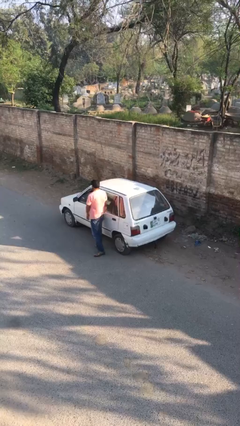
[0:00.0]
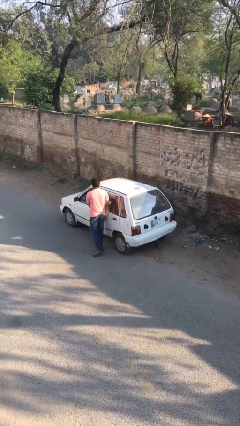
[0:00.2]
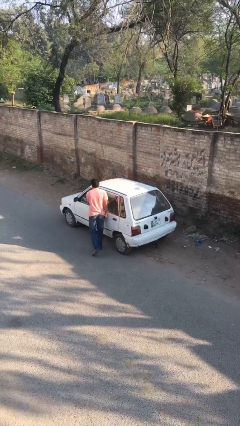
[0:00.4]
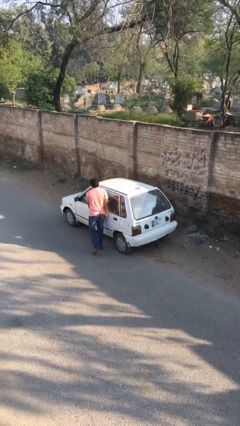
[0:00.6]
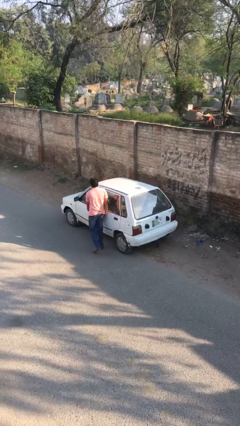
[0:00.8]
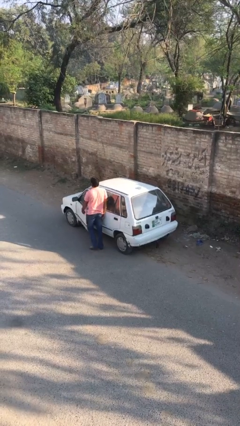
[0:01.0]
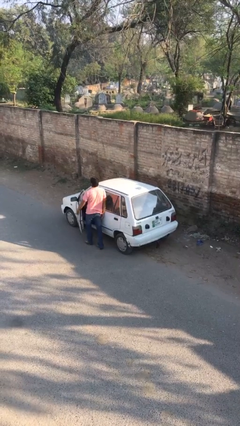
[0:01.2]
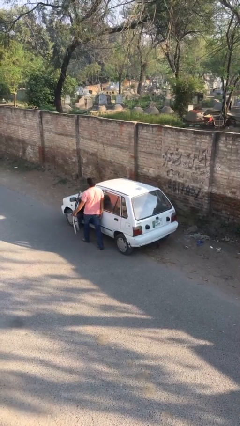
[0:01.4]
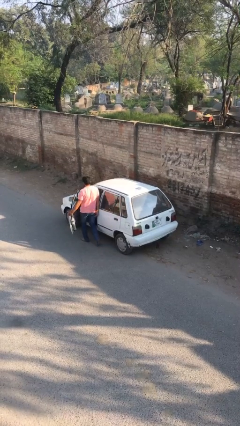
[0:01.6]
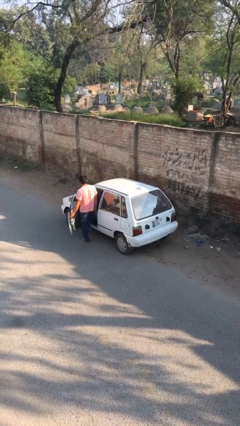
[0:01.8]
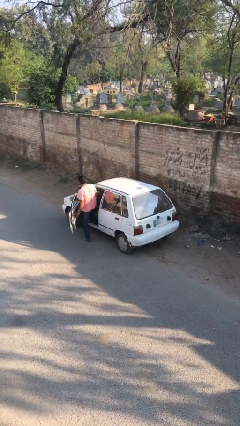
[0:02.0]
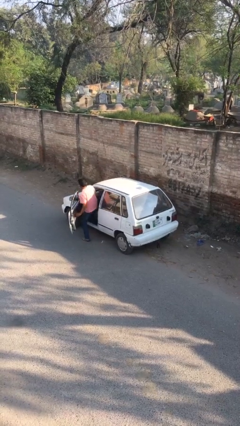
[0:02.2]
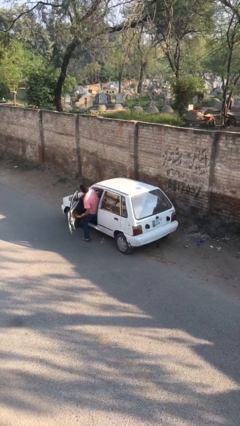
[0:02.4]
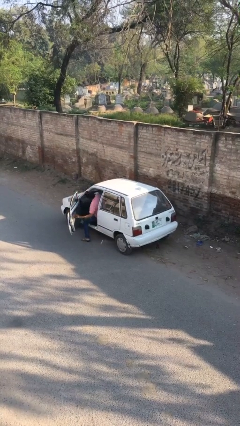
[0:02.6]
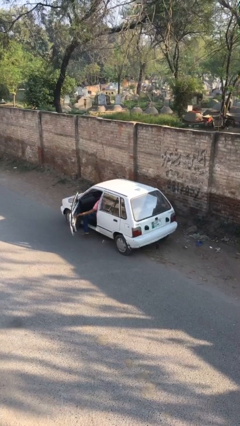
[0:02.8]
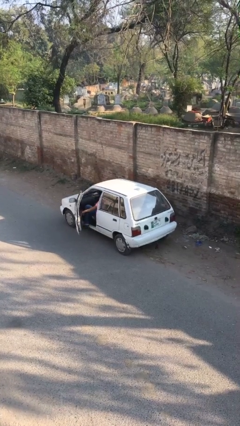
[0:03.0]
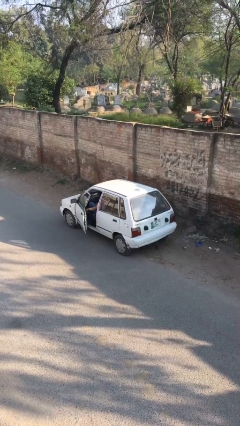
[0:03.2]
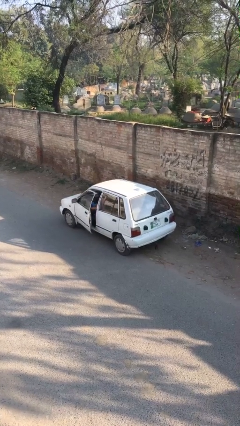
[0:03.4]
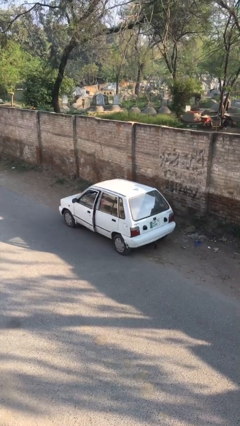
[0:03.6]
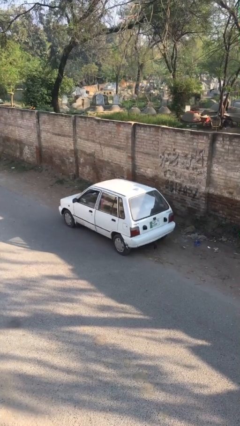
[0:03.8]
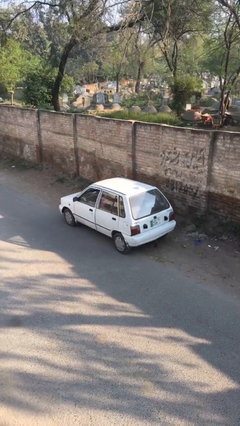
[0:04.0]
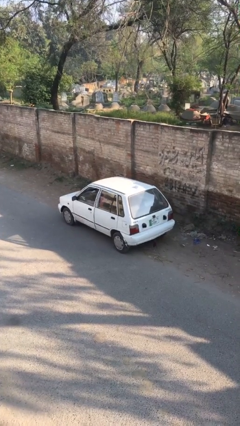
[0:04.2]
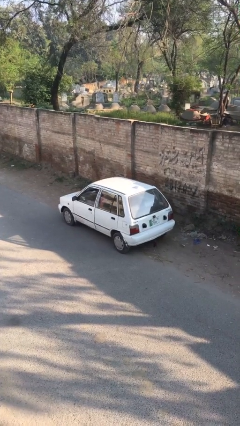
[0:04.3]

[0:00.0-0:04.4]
car picks up person

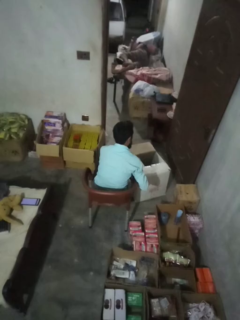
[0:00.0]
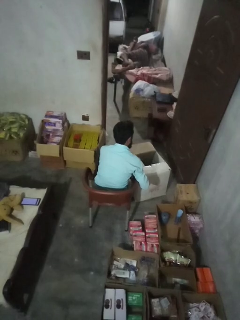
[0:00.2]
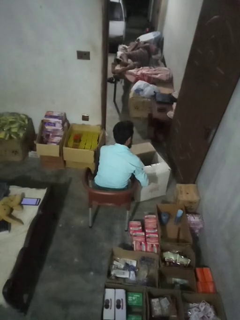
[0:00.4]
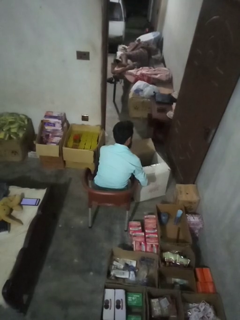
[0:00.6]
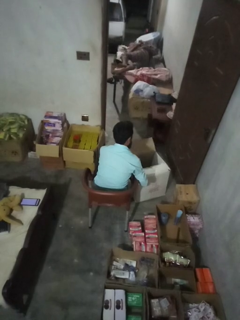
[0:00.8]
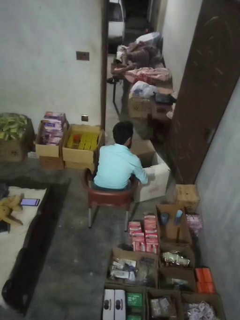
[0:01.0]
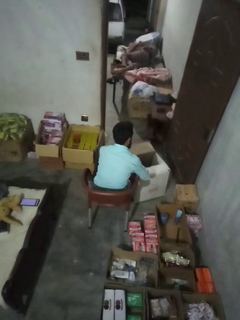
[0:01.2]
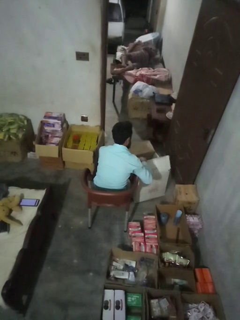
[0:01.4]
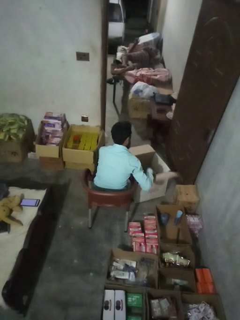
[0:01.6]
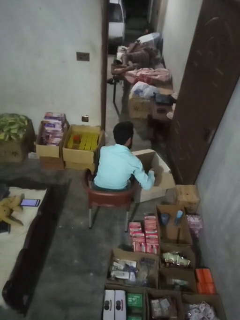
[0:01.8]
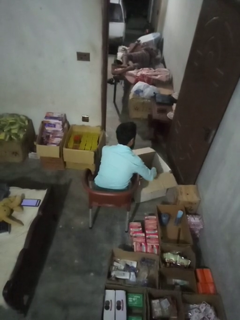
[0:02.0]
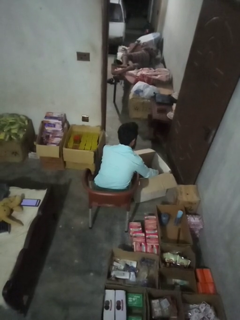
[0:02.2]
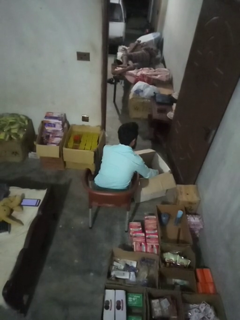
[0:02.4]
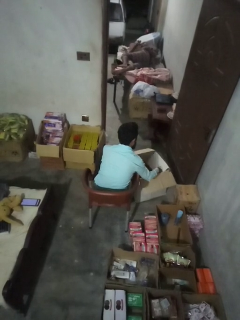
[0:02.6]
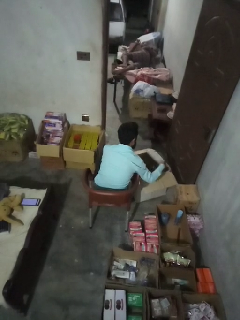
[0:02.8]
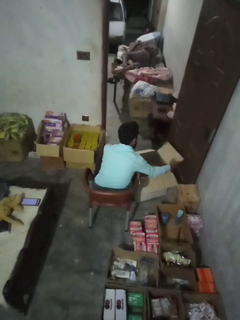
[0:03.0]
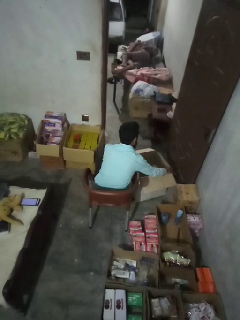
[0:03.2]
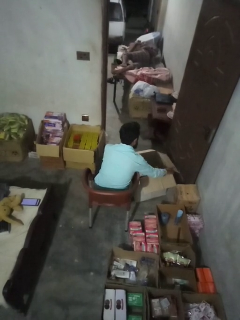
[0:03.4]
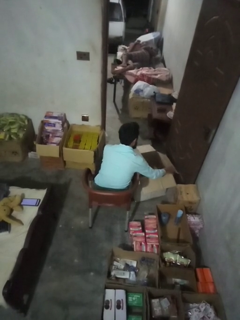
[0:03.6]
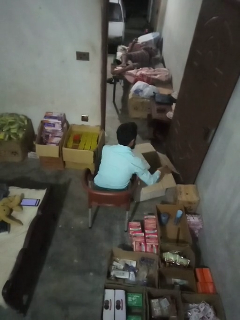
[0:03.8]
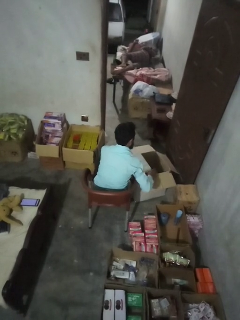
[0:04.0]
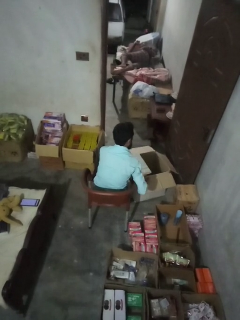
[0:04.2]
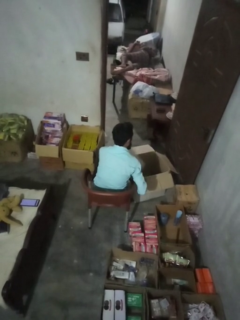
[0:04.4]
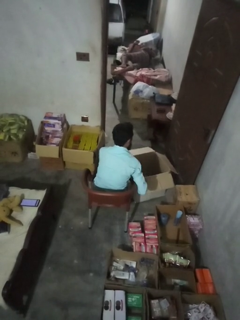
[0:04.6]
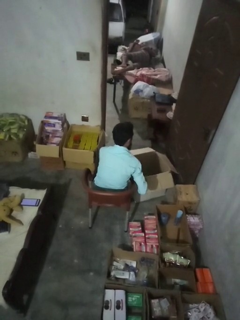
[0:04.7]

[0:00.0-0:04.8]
person opens box

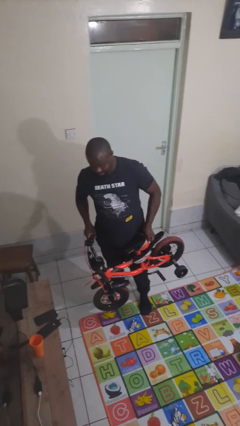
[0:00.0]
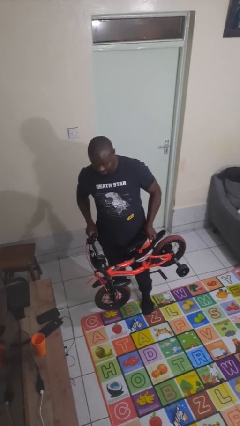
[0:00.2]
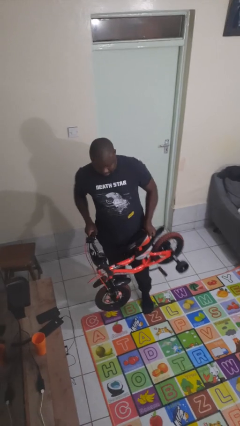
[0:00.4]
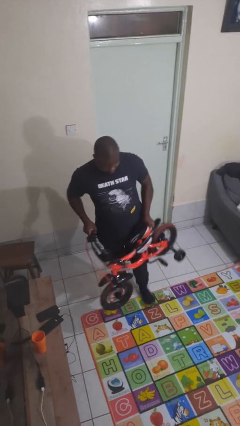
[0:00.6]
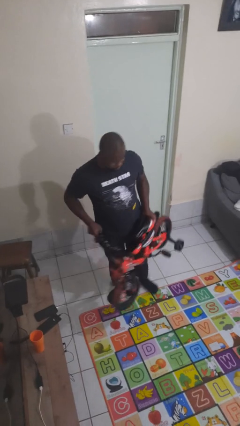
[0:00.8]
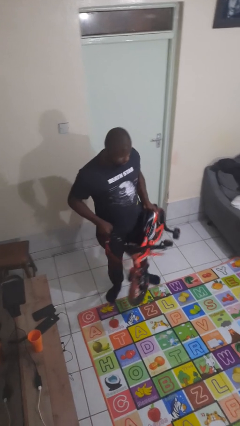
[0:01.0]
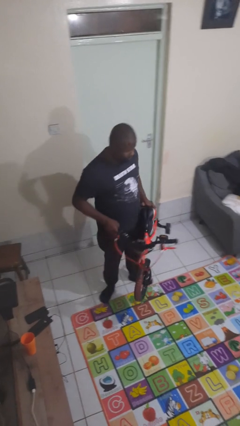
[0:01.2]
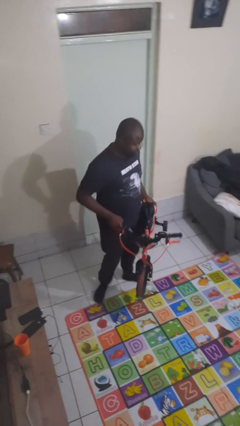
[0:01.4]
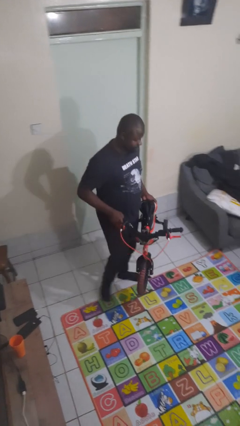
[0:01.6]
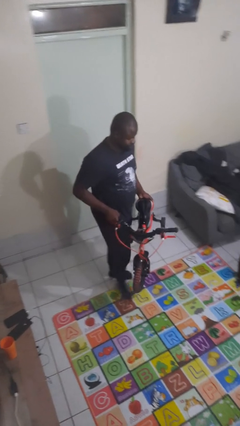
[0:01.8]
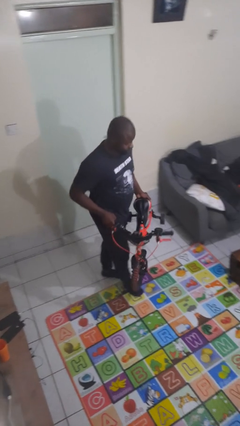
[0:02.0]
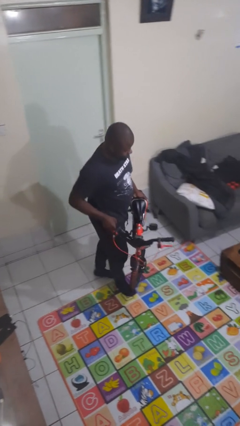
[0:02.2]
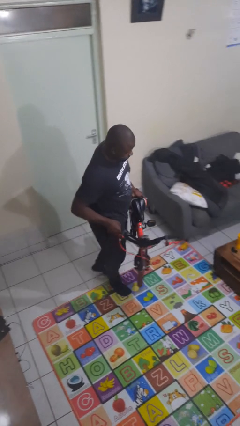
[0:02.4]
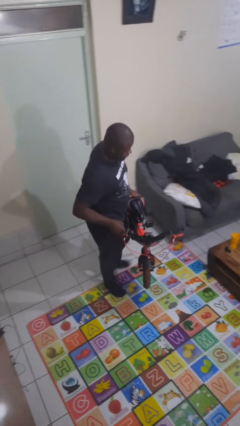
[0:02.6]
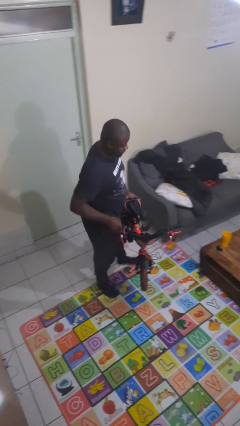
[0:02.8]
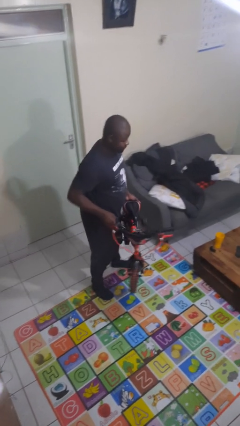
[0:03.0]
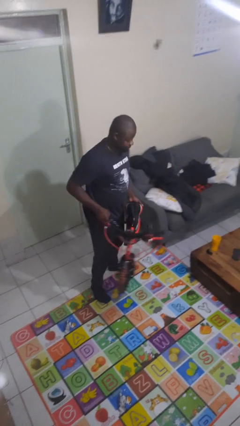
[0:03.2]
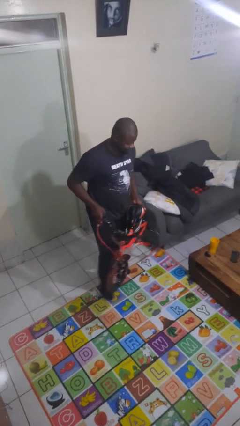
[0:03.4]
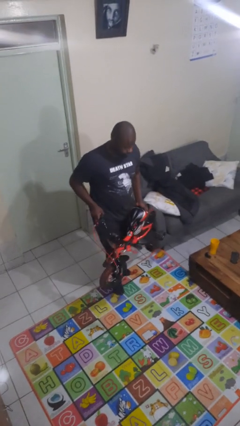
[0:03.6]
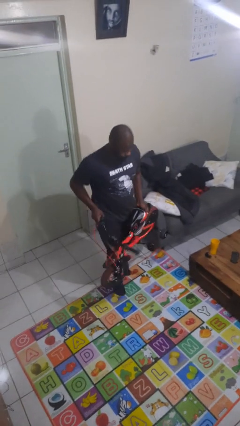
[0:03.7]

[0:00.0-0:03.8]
person carries bicycle

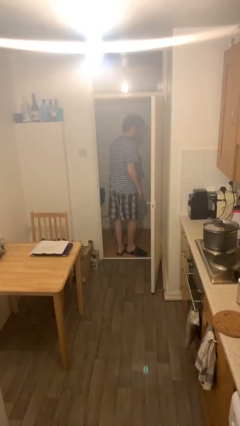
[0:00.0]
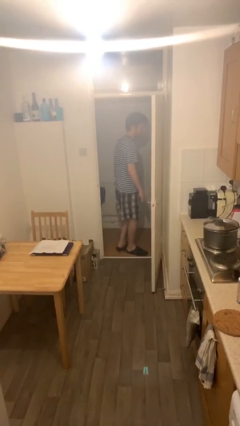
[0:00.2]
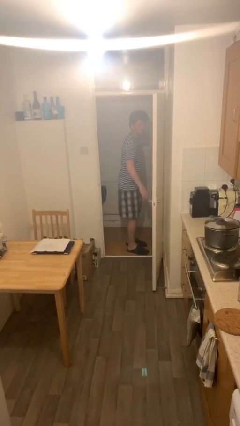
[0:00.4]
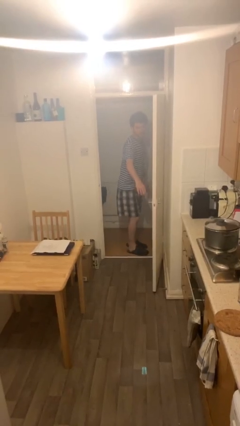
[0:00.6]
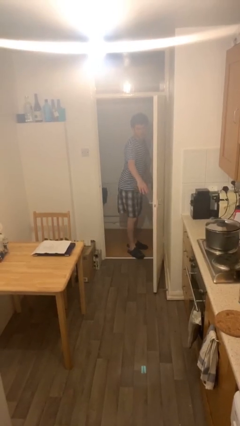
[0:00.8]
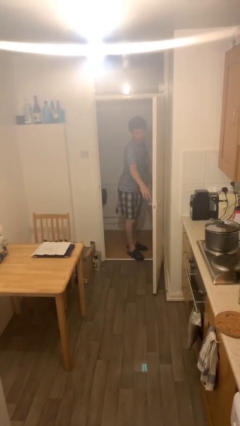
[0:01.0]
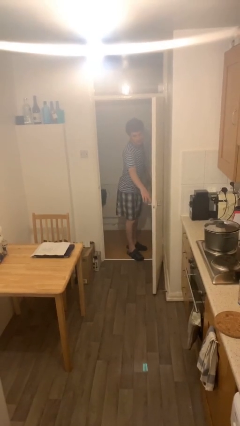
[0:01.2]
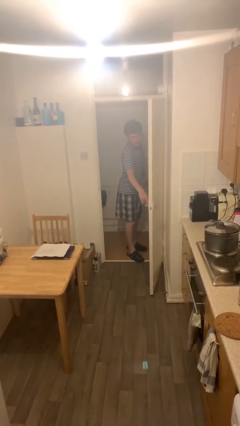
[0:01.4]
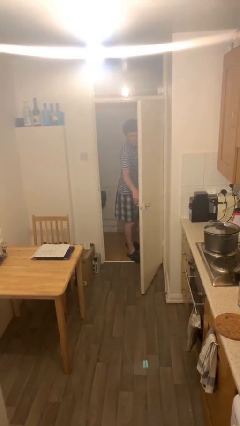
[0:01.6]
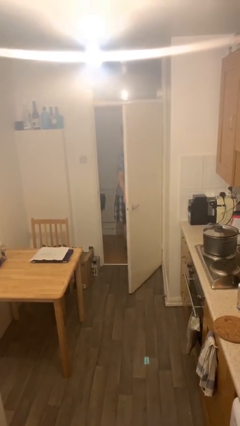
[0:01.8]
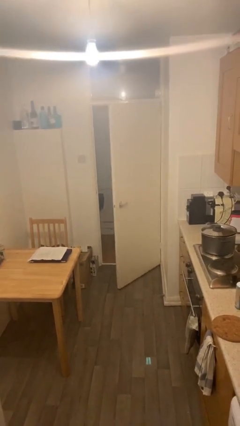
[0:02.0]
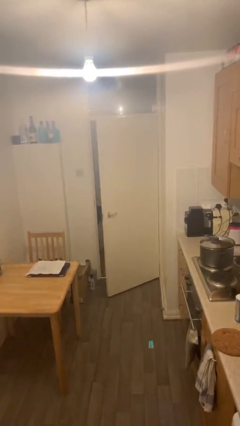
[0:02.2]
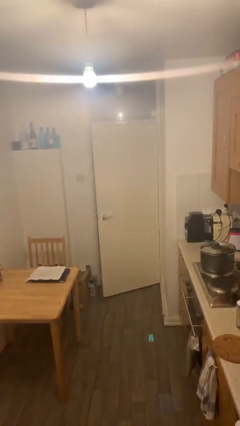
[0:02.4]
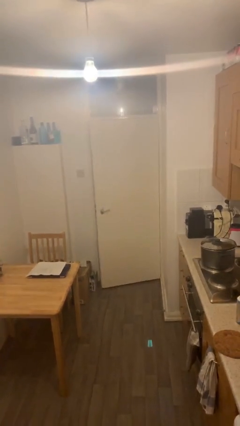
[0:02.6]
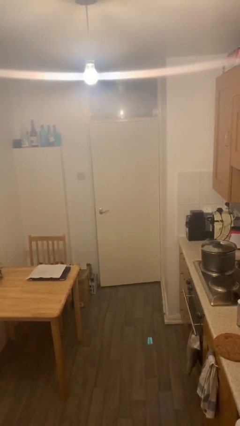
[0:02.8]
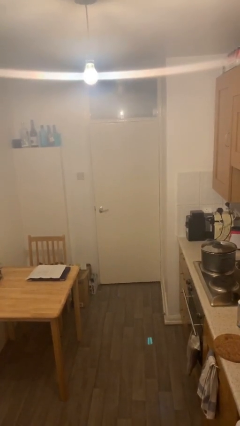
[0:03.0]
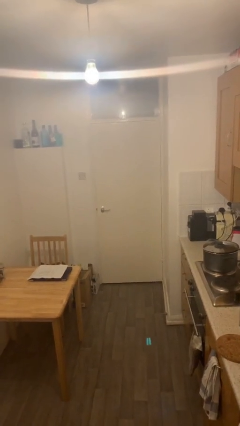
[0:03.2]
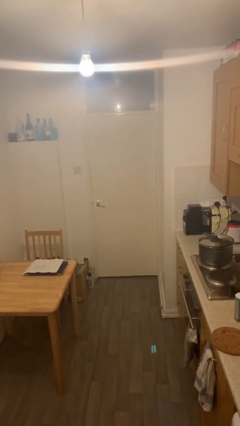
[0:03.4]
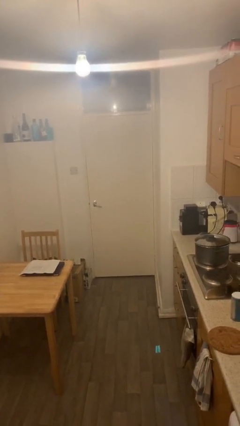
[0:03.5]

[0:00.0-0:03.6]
person closes facility door

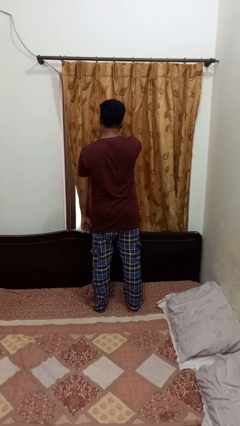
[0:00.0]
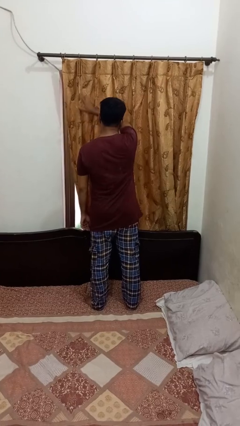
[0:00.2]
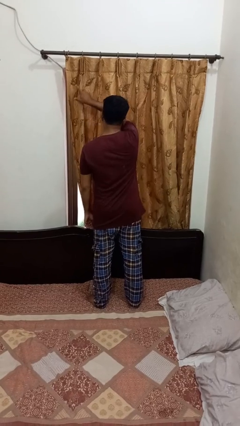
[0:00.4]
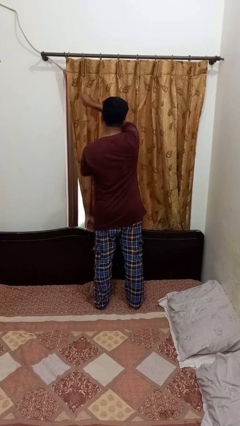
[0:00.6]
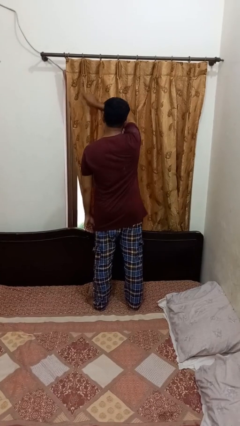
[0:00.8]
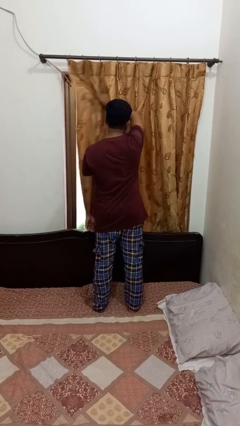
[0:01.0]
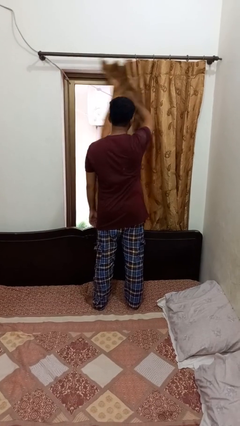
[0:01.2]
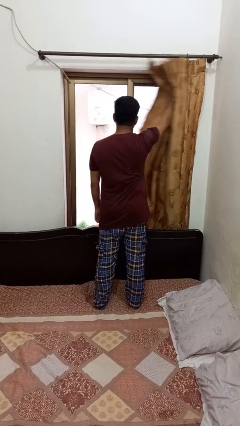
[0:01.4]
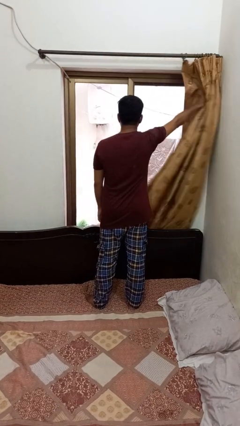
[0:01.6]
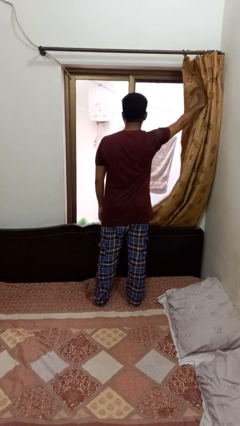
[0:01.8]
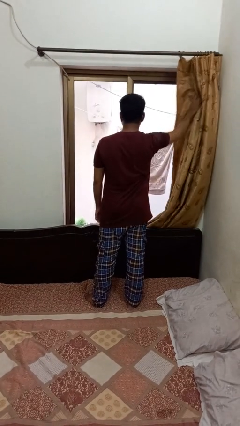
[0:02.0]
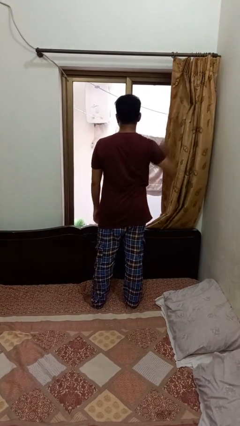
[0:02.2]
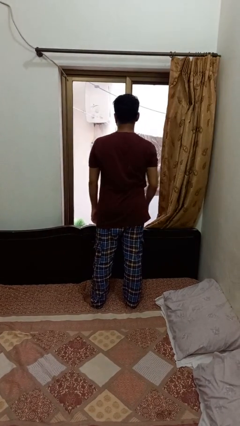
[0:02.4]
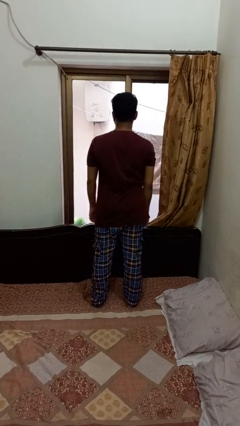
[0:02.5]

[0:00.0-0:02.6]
person opens curtains
